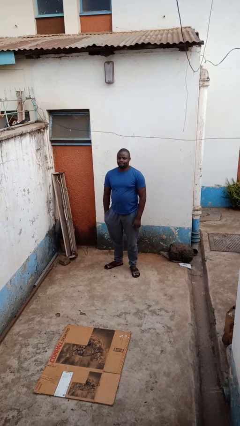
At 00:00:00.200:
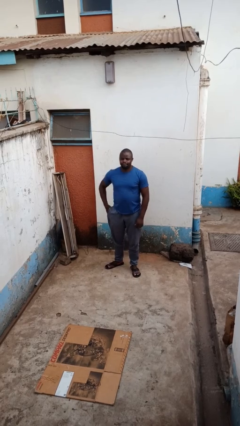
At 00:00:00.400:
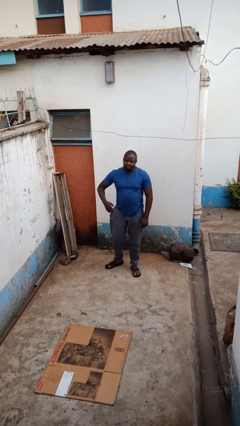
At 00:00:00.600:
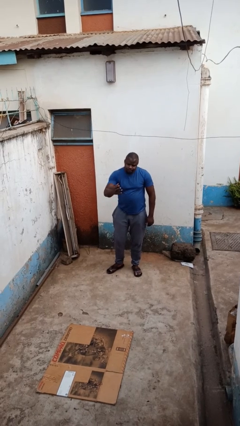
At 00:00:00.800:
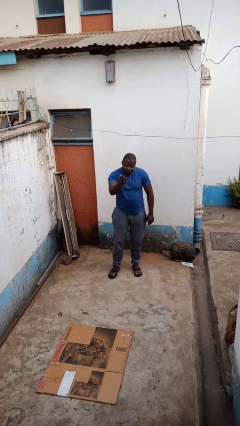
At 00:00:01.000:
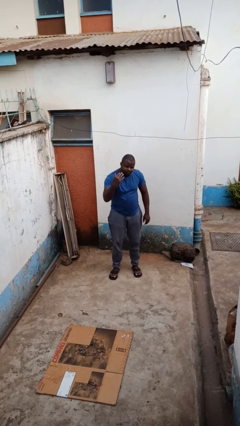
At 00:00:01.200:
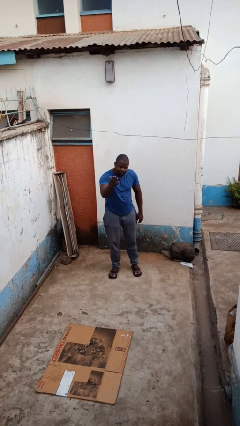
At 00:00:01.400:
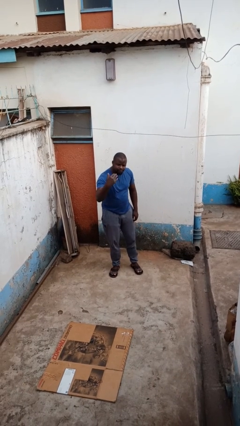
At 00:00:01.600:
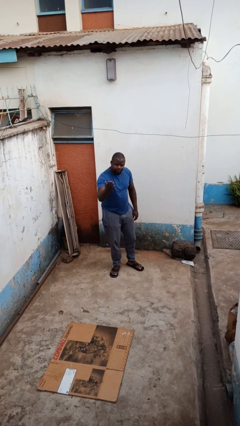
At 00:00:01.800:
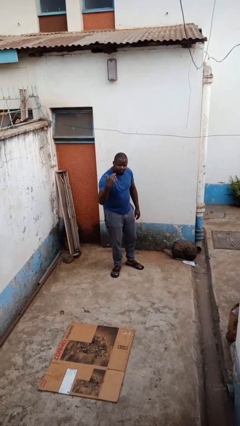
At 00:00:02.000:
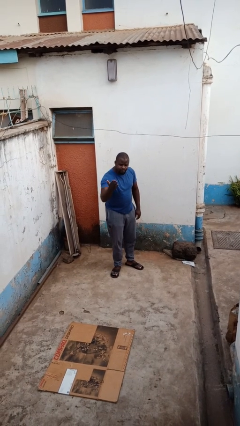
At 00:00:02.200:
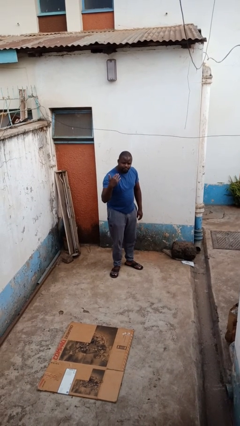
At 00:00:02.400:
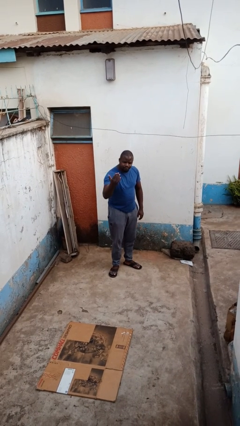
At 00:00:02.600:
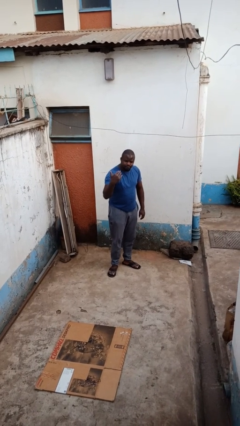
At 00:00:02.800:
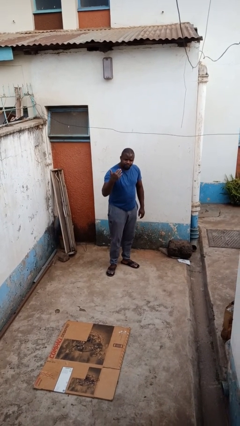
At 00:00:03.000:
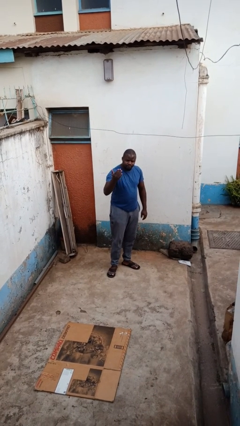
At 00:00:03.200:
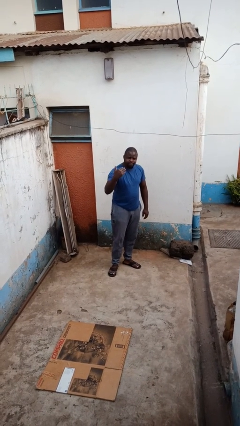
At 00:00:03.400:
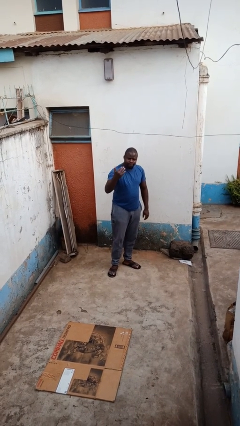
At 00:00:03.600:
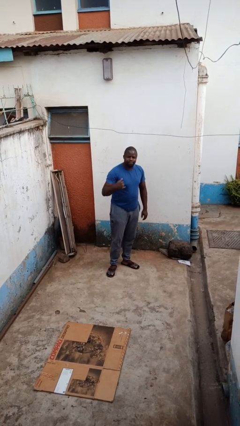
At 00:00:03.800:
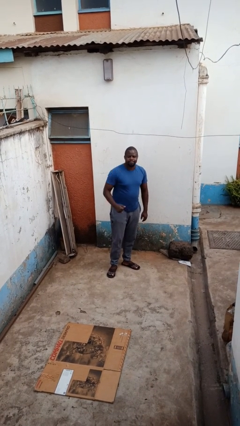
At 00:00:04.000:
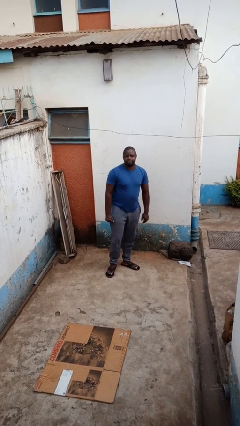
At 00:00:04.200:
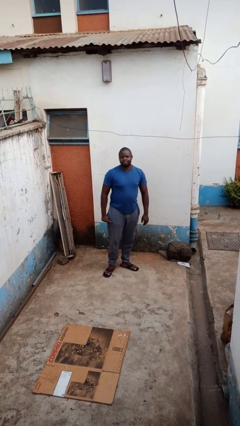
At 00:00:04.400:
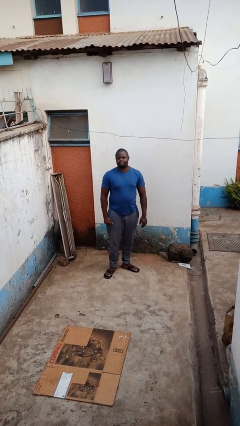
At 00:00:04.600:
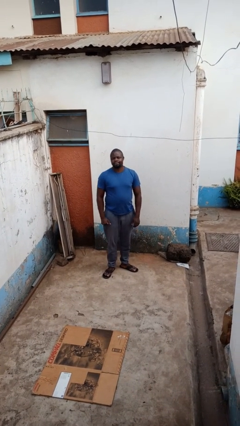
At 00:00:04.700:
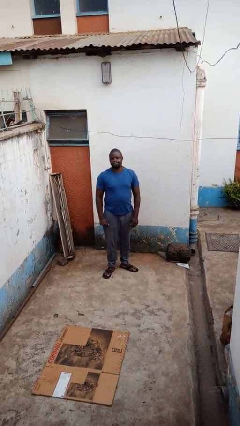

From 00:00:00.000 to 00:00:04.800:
person gestures come here

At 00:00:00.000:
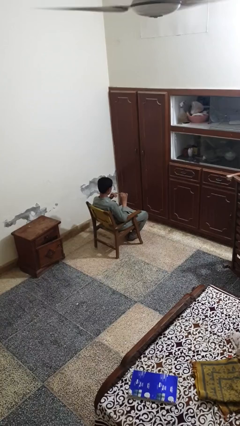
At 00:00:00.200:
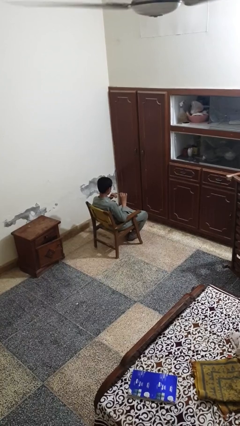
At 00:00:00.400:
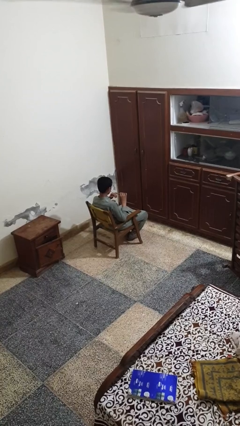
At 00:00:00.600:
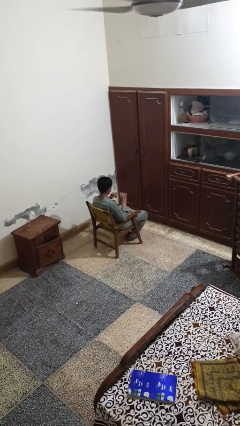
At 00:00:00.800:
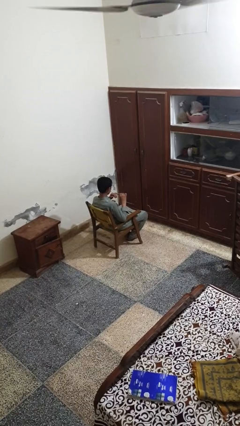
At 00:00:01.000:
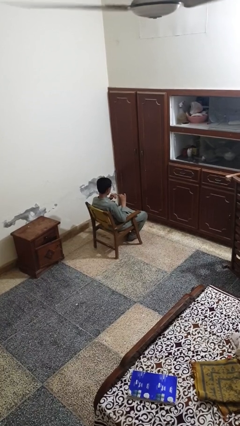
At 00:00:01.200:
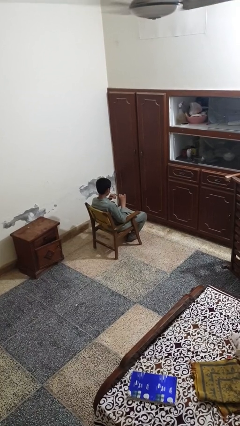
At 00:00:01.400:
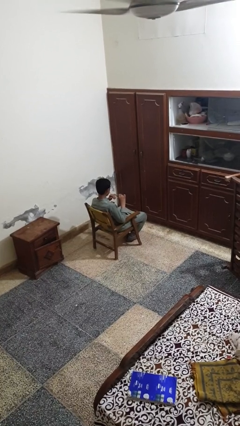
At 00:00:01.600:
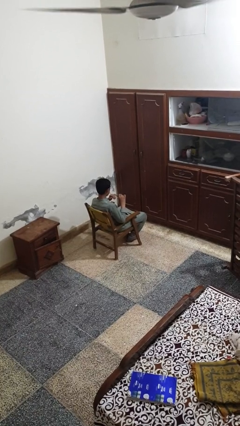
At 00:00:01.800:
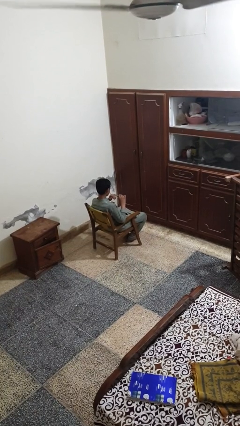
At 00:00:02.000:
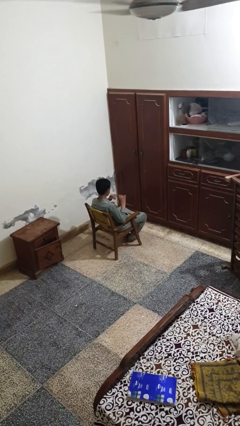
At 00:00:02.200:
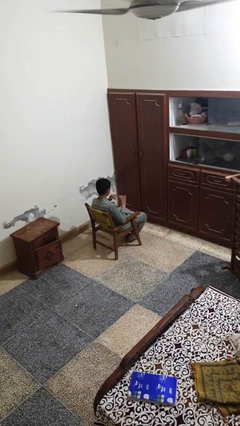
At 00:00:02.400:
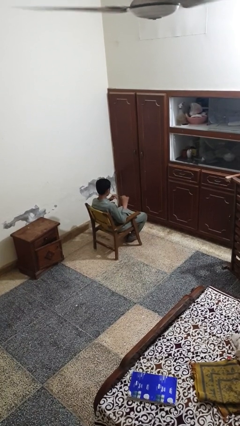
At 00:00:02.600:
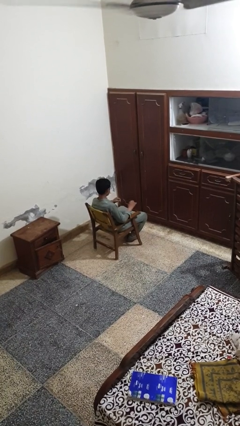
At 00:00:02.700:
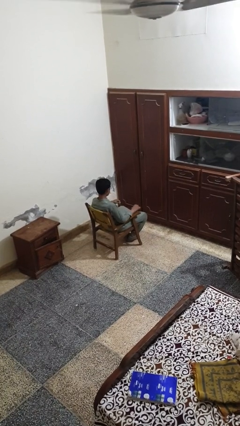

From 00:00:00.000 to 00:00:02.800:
person clips fingernails

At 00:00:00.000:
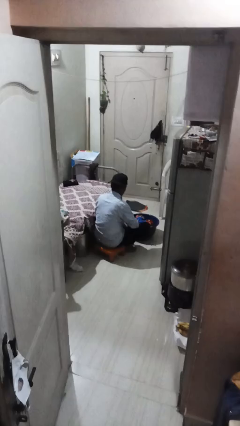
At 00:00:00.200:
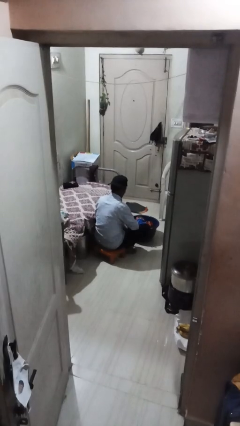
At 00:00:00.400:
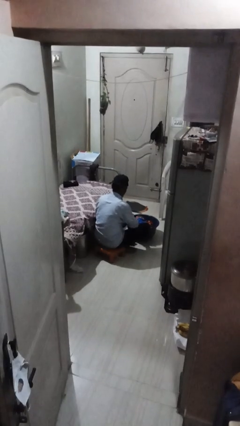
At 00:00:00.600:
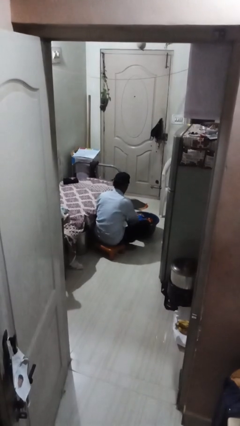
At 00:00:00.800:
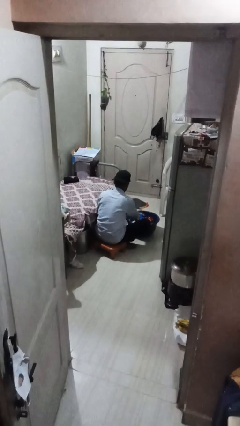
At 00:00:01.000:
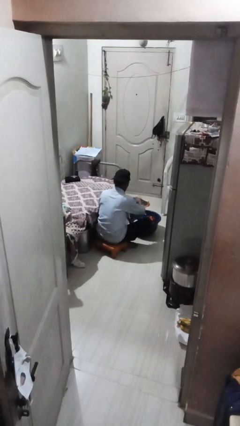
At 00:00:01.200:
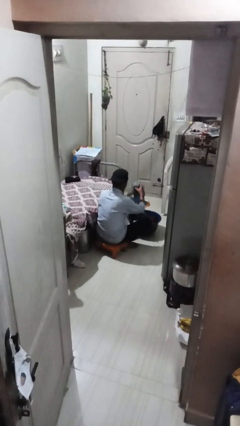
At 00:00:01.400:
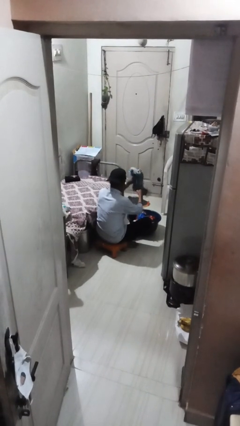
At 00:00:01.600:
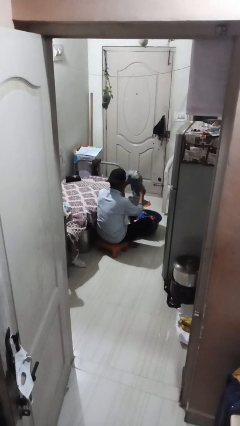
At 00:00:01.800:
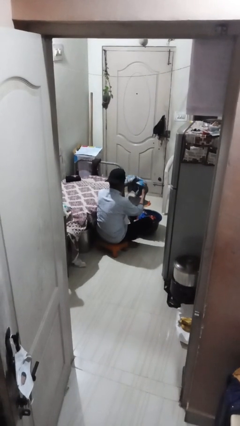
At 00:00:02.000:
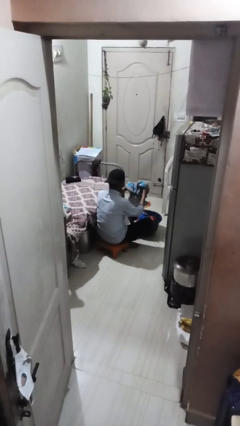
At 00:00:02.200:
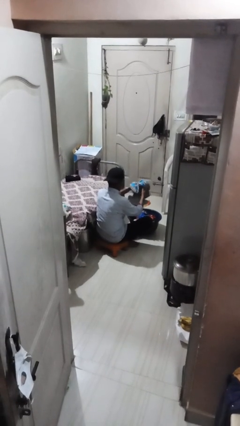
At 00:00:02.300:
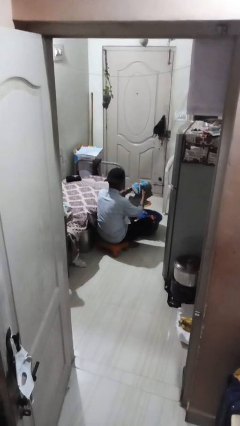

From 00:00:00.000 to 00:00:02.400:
person takes object from basket

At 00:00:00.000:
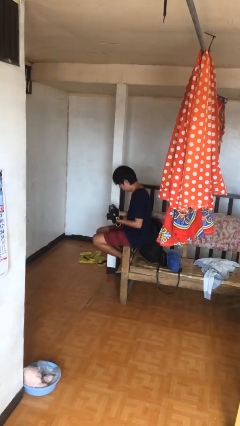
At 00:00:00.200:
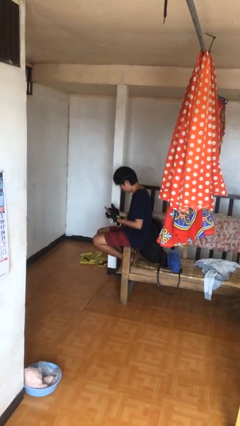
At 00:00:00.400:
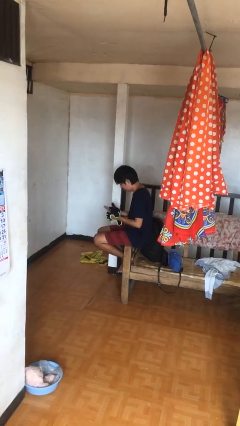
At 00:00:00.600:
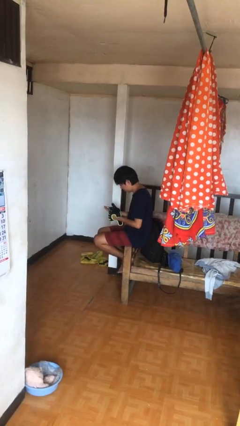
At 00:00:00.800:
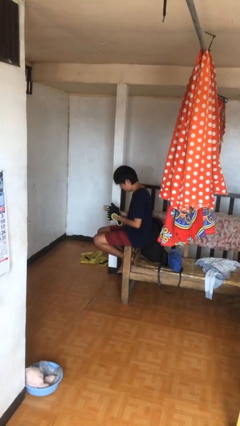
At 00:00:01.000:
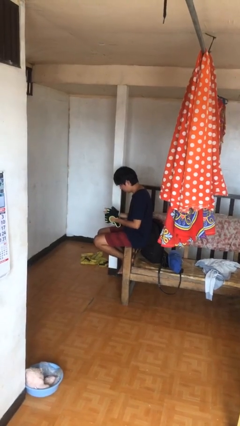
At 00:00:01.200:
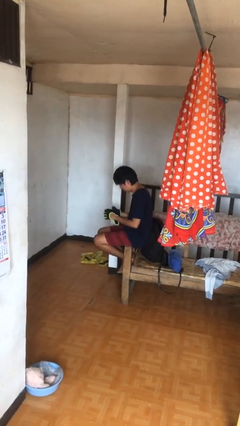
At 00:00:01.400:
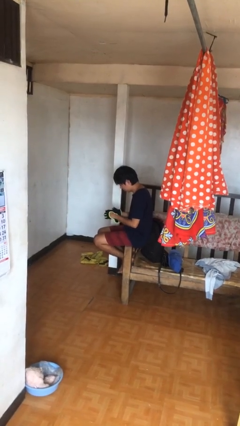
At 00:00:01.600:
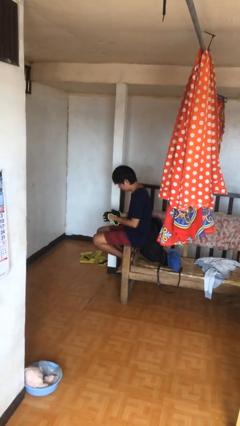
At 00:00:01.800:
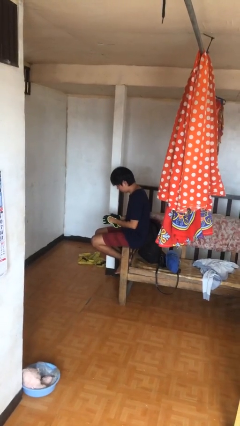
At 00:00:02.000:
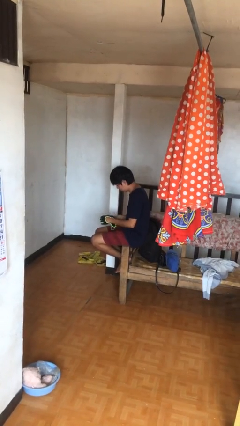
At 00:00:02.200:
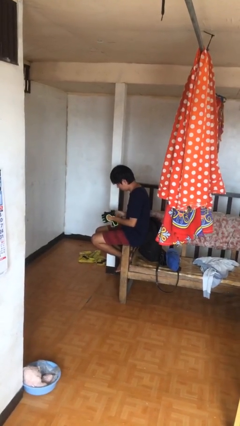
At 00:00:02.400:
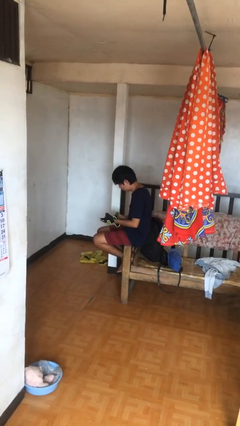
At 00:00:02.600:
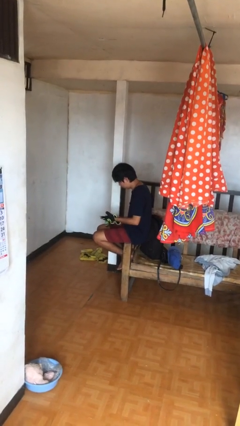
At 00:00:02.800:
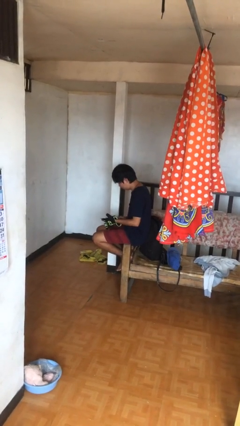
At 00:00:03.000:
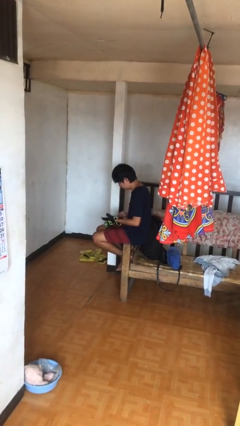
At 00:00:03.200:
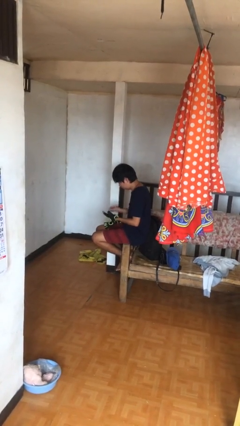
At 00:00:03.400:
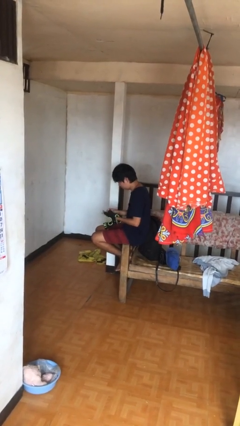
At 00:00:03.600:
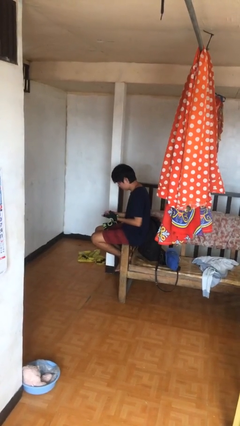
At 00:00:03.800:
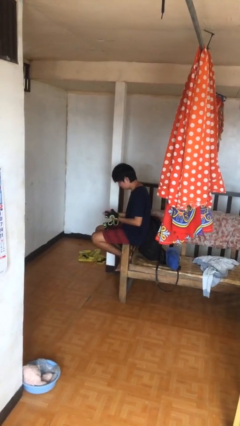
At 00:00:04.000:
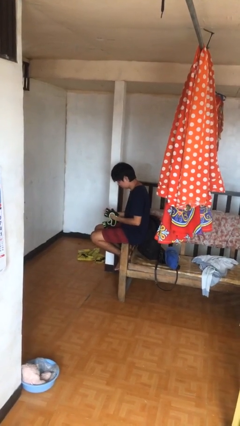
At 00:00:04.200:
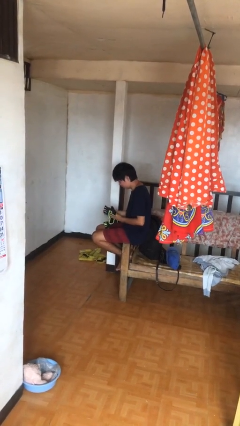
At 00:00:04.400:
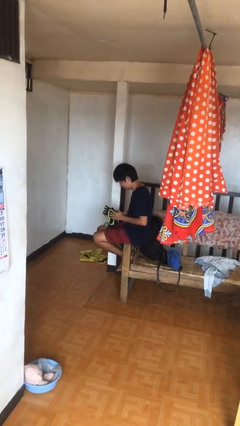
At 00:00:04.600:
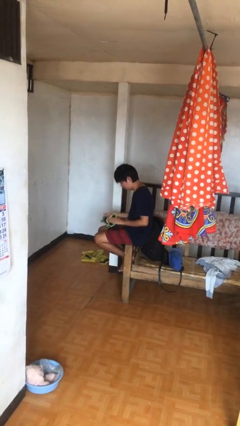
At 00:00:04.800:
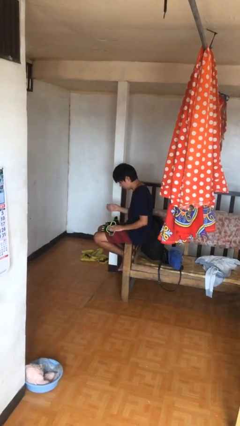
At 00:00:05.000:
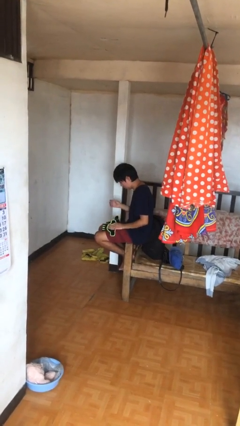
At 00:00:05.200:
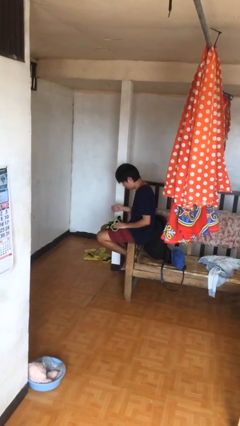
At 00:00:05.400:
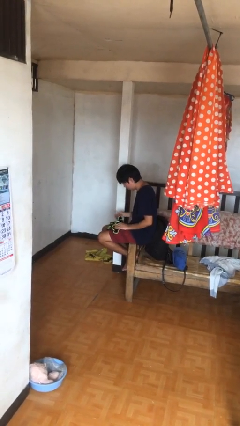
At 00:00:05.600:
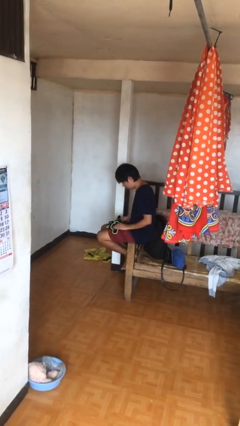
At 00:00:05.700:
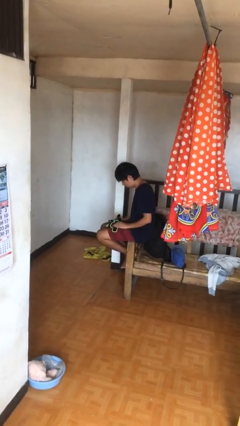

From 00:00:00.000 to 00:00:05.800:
person takes off gloves

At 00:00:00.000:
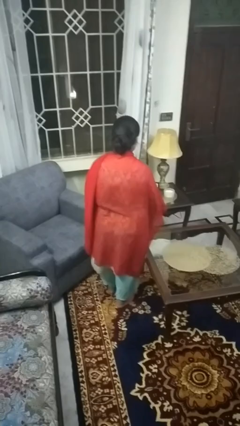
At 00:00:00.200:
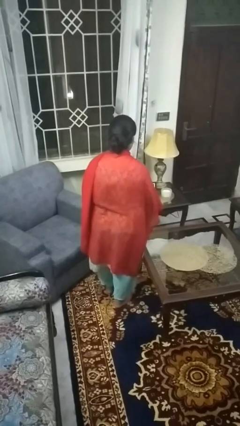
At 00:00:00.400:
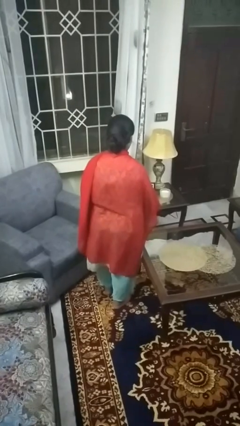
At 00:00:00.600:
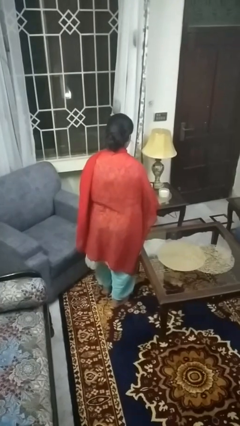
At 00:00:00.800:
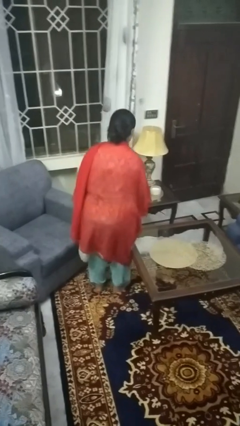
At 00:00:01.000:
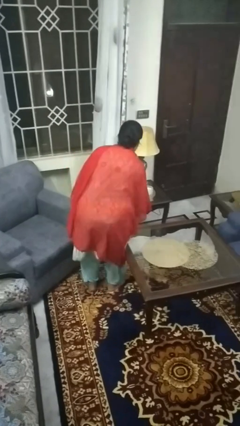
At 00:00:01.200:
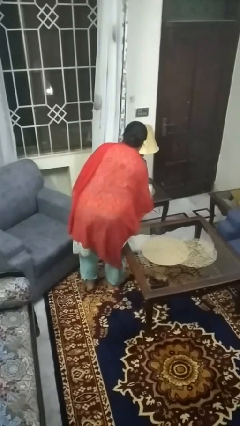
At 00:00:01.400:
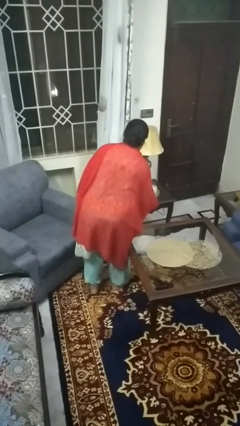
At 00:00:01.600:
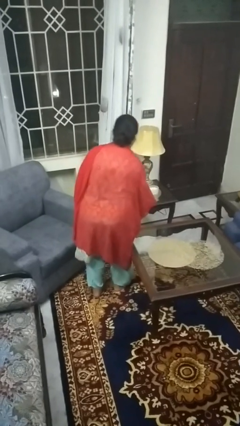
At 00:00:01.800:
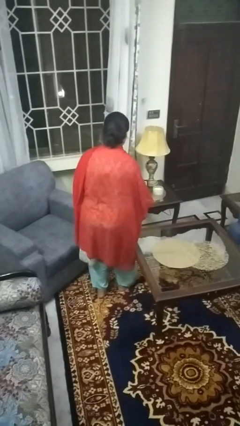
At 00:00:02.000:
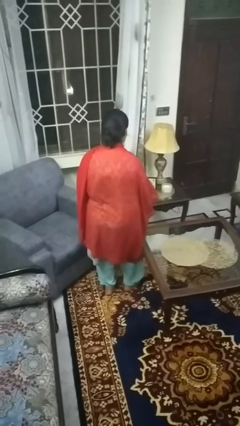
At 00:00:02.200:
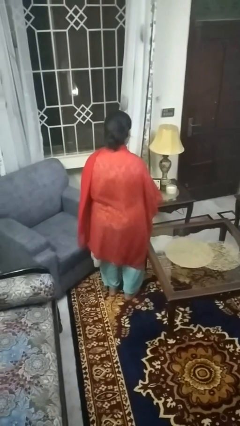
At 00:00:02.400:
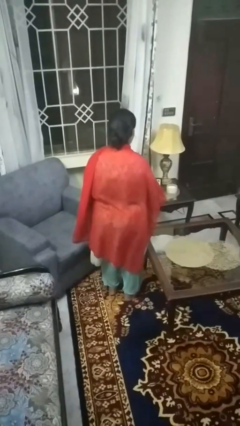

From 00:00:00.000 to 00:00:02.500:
person bumps into table
